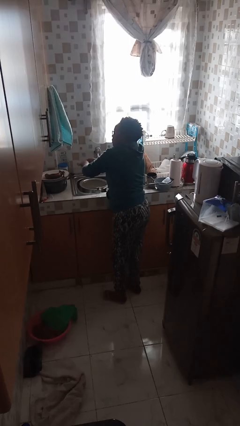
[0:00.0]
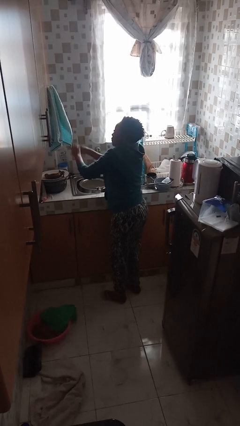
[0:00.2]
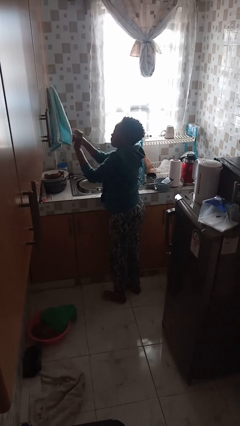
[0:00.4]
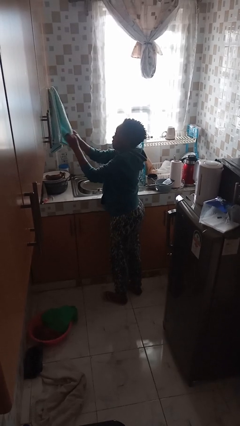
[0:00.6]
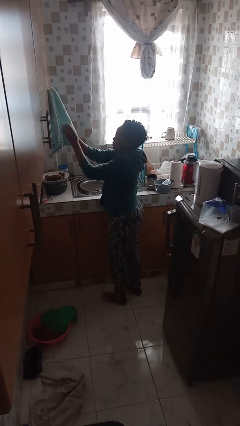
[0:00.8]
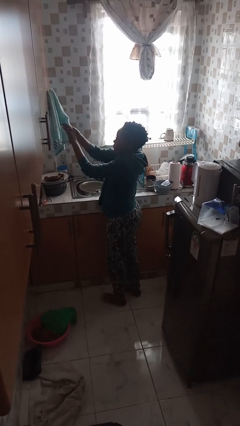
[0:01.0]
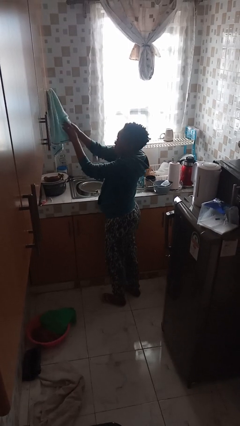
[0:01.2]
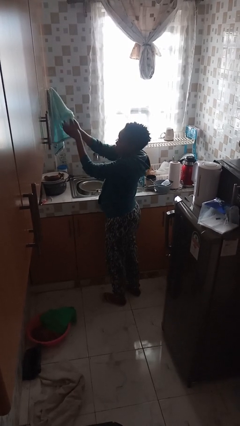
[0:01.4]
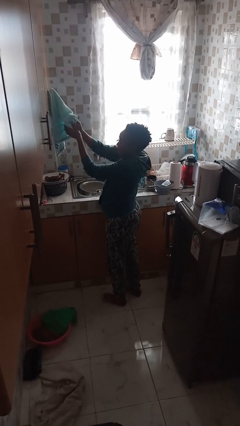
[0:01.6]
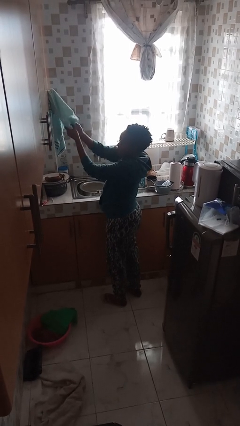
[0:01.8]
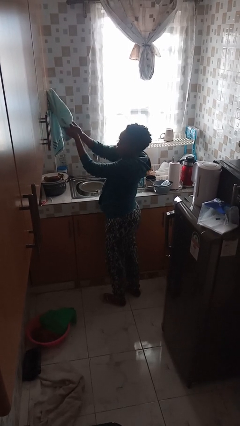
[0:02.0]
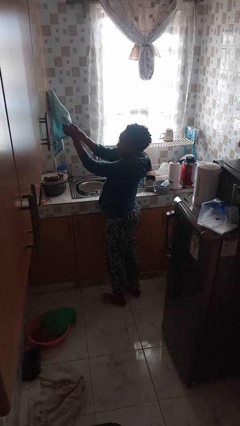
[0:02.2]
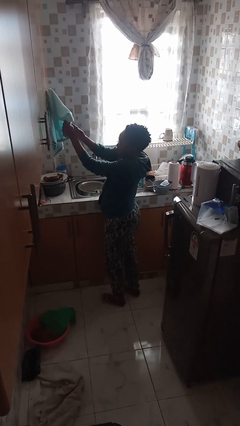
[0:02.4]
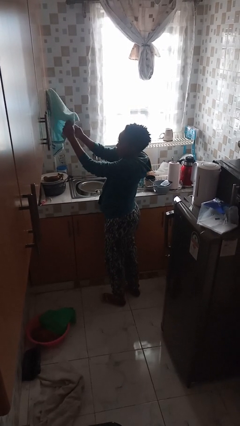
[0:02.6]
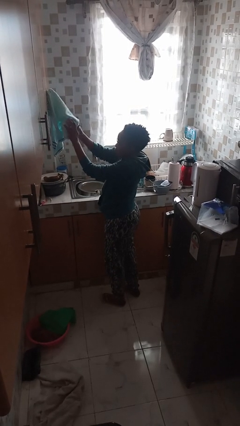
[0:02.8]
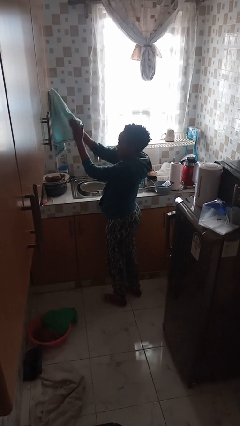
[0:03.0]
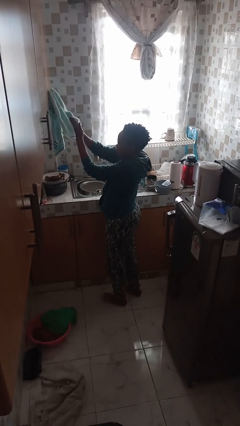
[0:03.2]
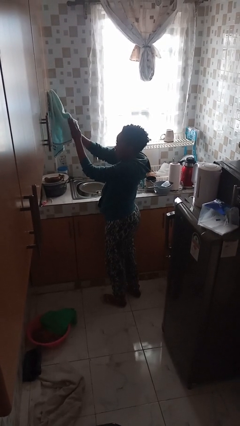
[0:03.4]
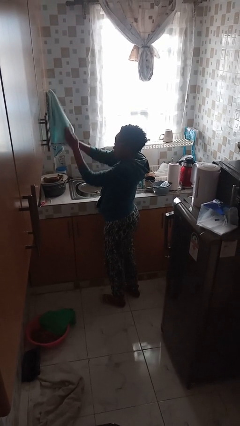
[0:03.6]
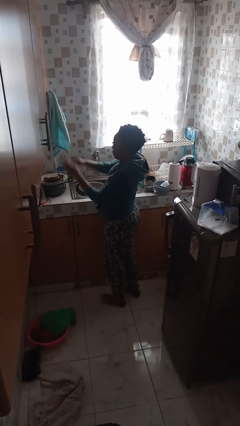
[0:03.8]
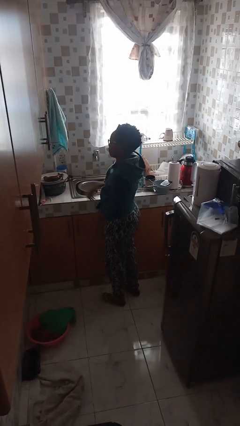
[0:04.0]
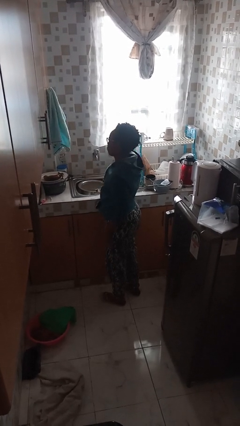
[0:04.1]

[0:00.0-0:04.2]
person dries hands with towel

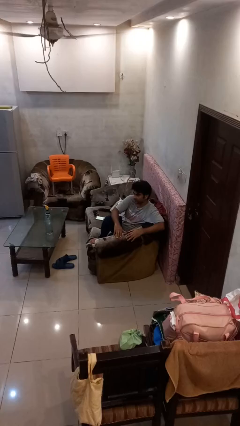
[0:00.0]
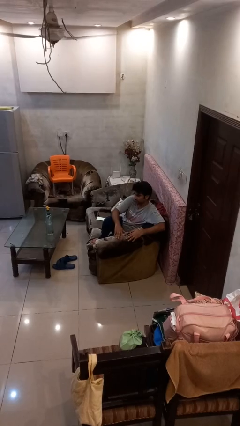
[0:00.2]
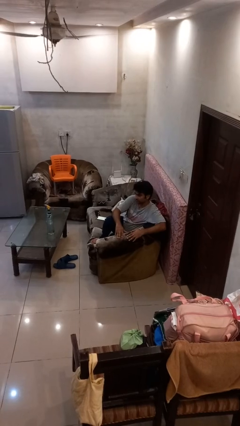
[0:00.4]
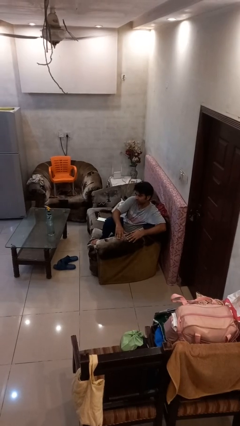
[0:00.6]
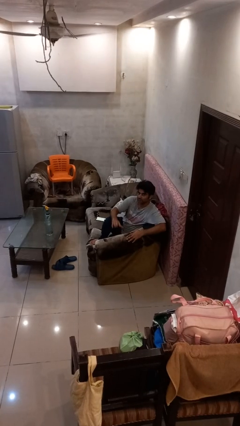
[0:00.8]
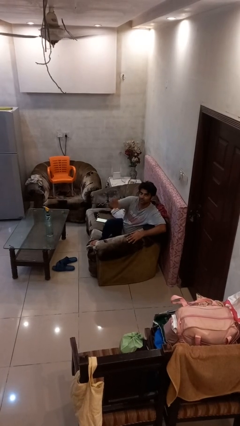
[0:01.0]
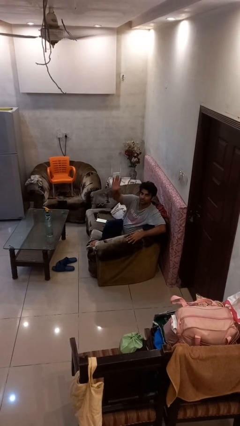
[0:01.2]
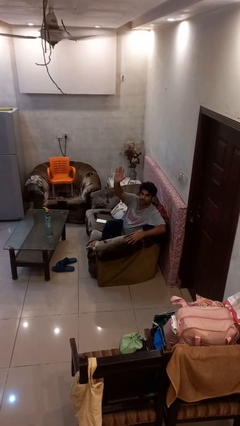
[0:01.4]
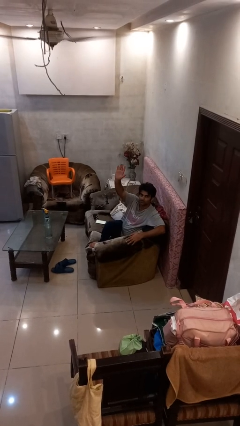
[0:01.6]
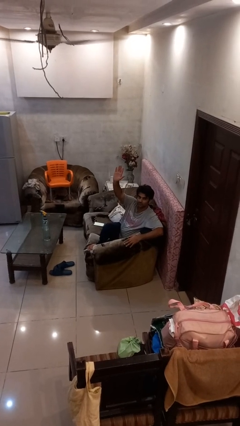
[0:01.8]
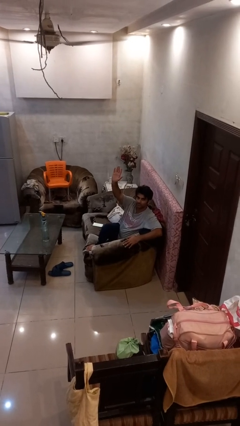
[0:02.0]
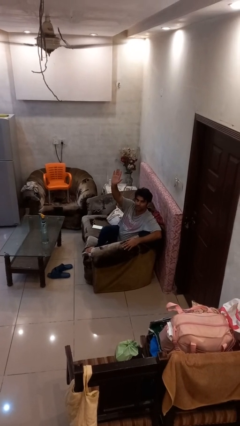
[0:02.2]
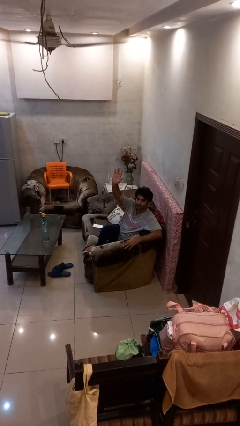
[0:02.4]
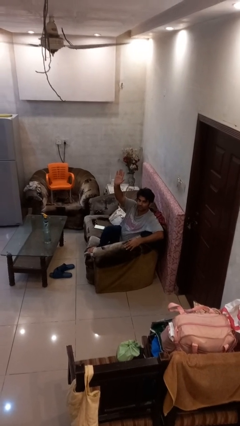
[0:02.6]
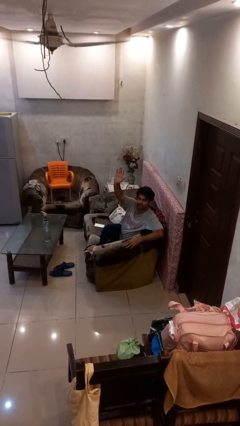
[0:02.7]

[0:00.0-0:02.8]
person gestures raise hand

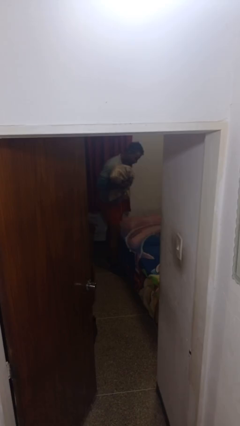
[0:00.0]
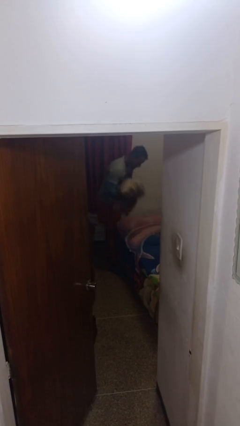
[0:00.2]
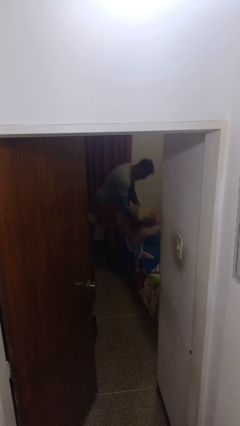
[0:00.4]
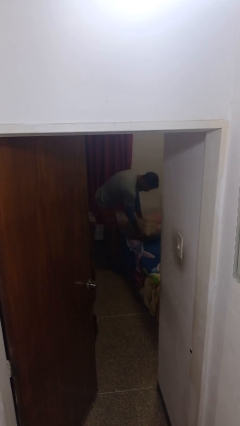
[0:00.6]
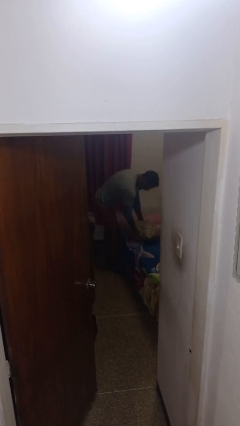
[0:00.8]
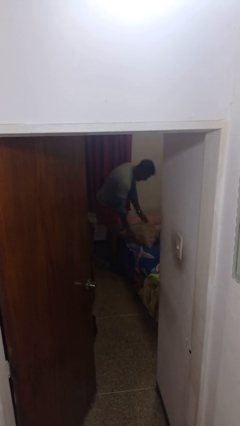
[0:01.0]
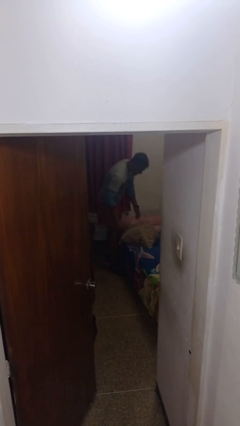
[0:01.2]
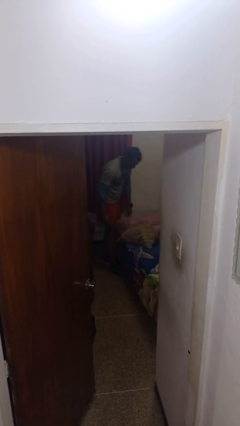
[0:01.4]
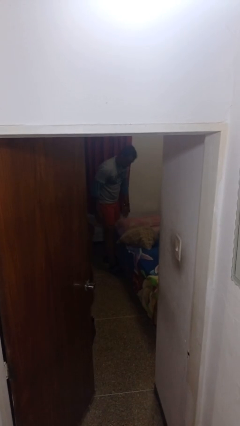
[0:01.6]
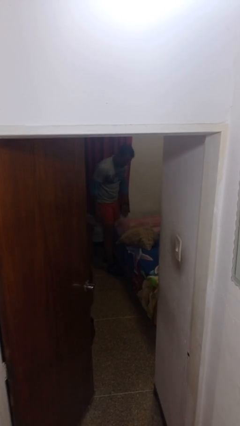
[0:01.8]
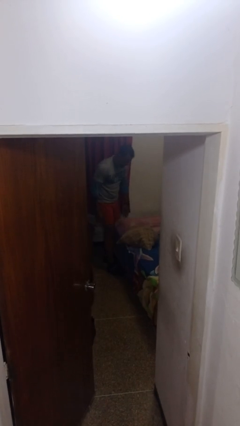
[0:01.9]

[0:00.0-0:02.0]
person puts down object on bed

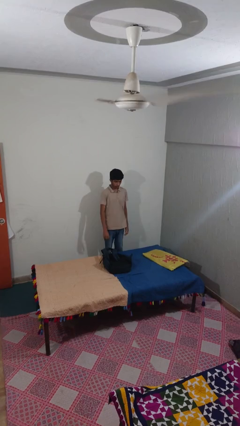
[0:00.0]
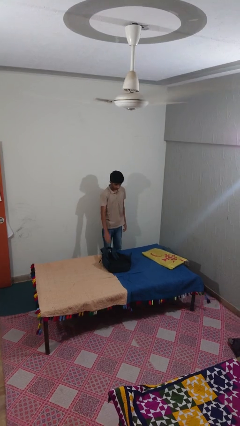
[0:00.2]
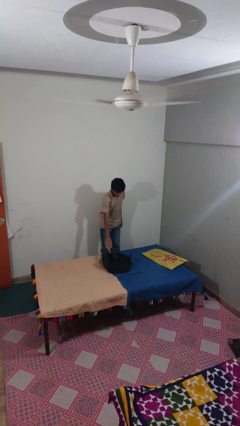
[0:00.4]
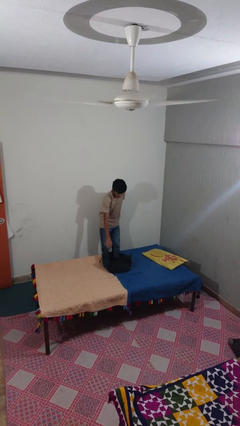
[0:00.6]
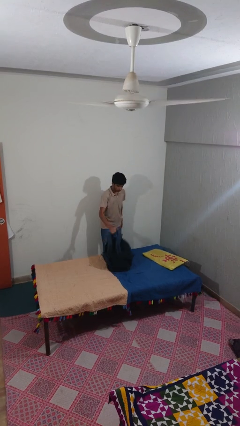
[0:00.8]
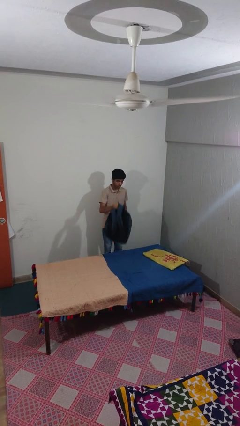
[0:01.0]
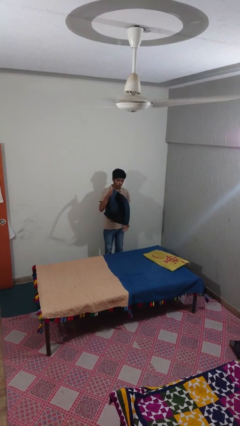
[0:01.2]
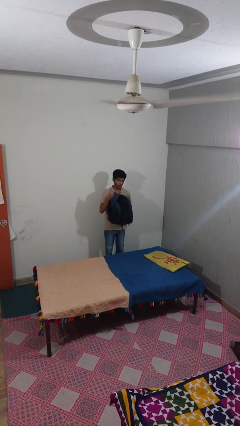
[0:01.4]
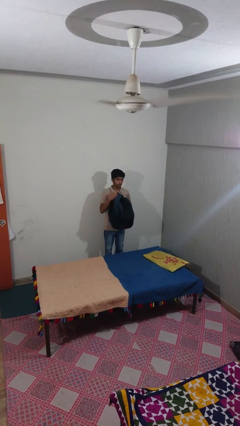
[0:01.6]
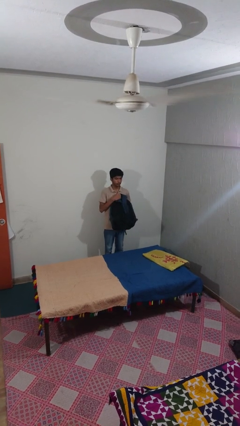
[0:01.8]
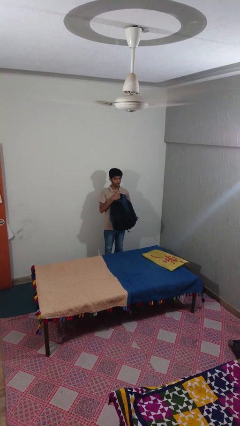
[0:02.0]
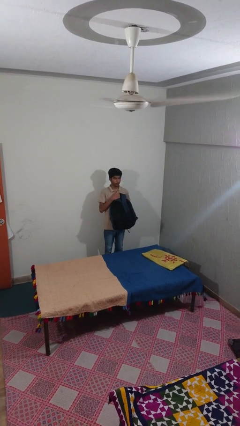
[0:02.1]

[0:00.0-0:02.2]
person picks up object from bed

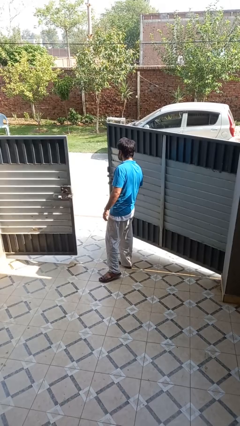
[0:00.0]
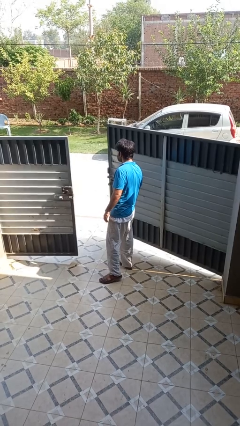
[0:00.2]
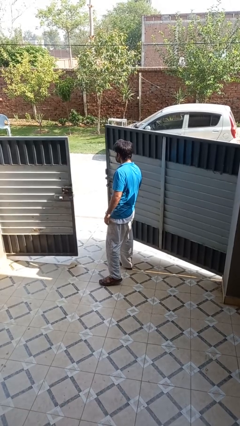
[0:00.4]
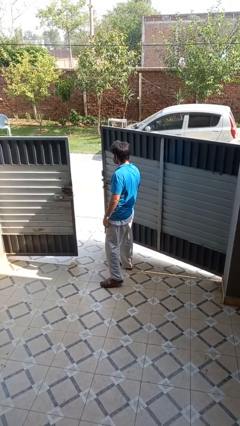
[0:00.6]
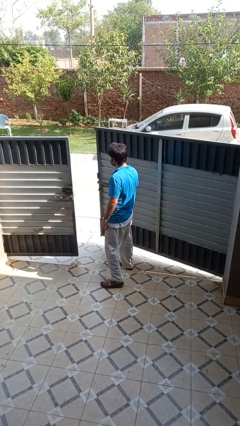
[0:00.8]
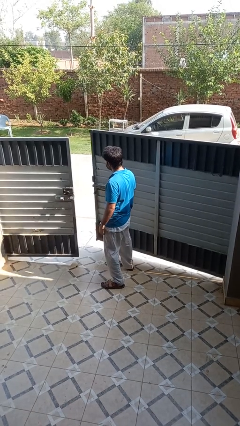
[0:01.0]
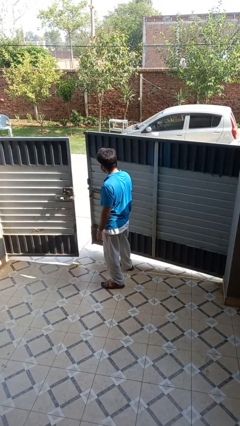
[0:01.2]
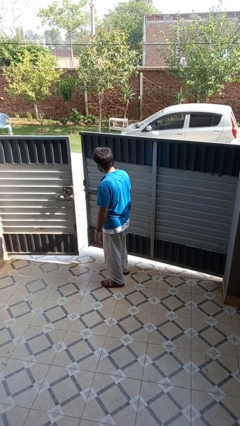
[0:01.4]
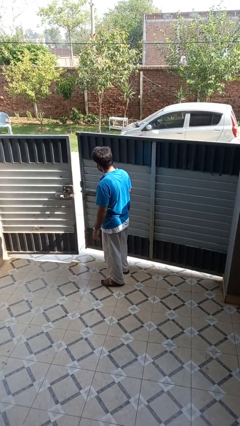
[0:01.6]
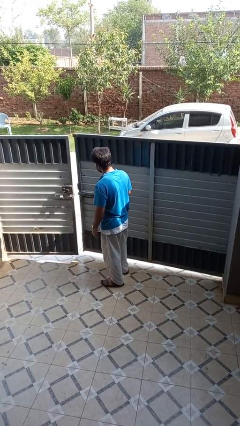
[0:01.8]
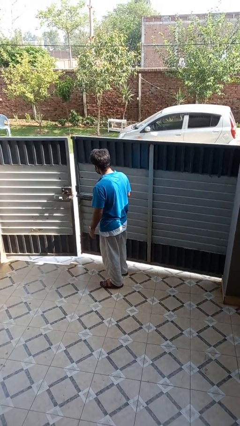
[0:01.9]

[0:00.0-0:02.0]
person closes gate

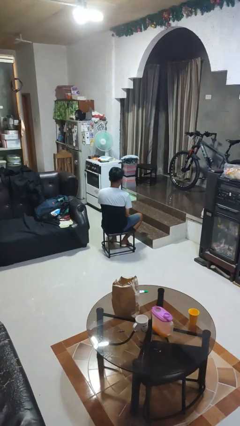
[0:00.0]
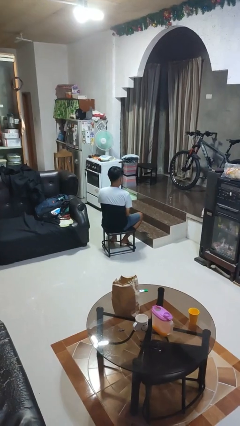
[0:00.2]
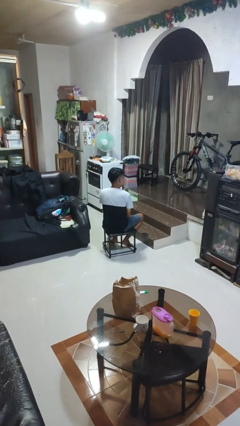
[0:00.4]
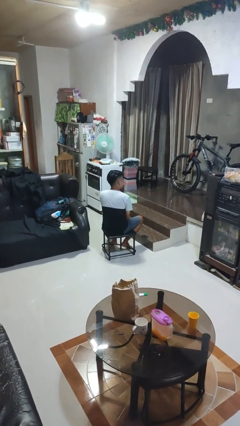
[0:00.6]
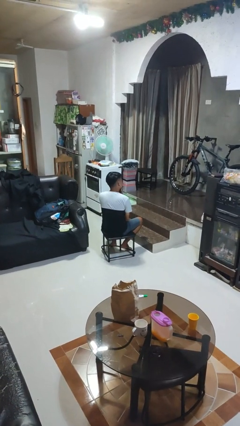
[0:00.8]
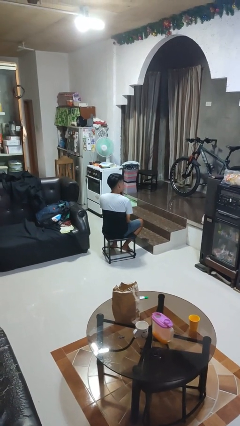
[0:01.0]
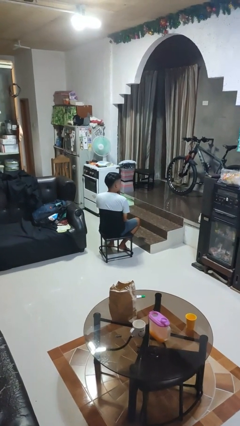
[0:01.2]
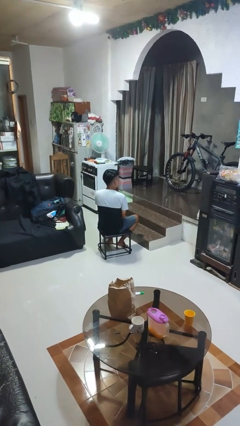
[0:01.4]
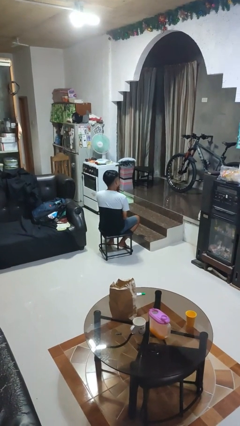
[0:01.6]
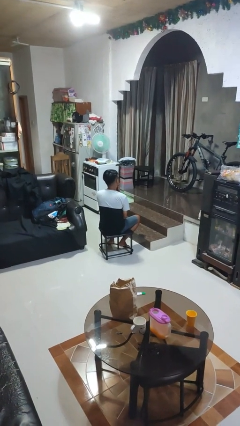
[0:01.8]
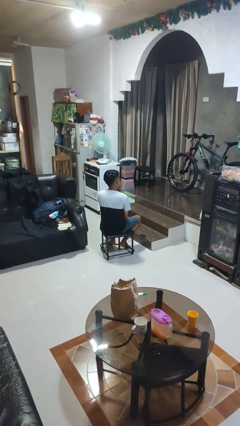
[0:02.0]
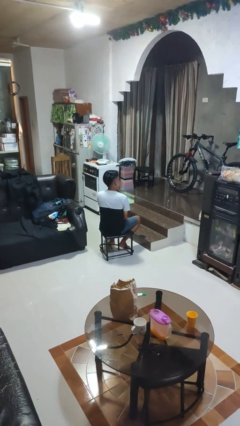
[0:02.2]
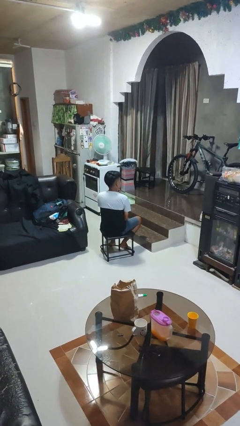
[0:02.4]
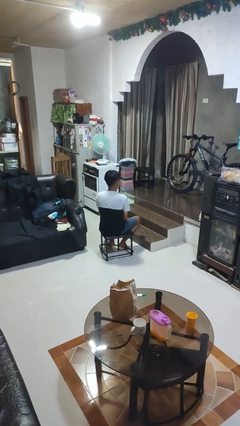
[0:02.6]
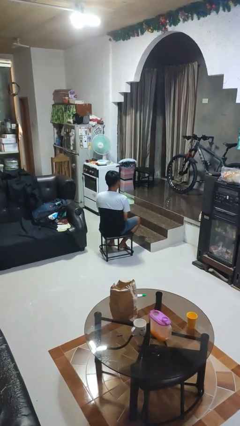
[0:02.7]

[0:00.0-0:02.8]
person strokes chin

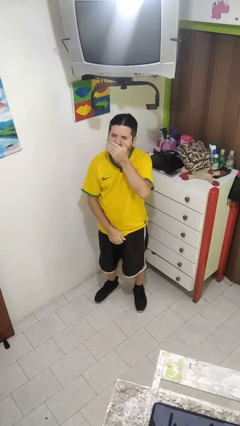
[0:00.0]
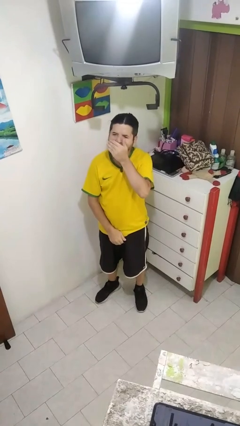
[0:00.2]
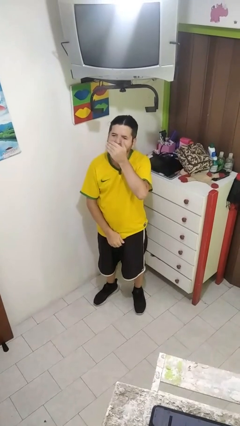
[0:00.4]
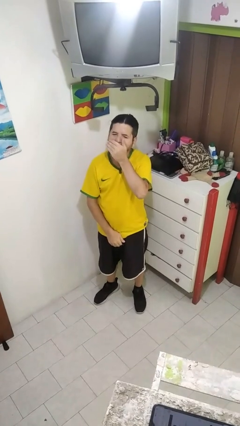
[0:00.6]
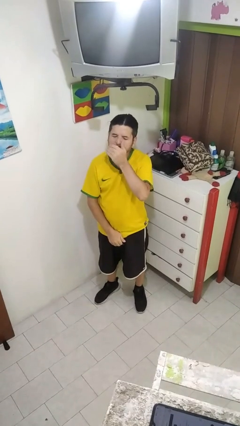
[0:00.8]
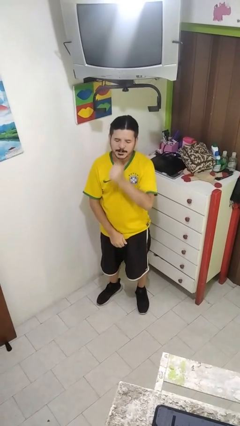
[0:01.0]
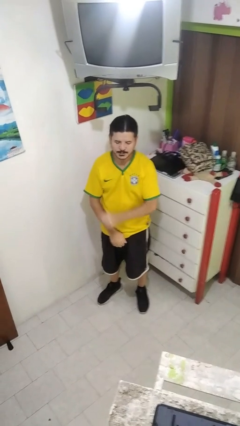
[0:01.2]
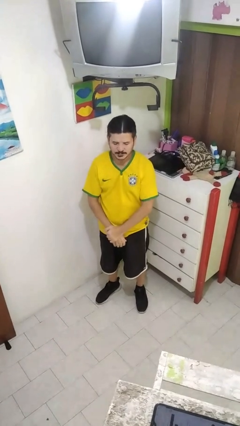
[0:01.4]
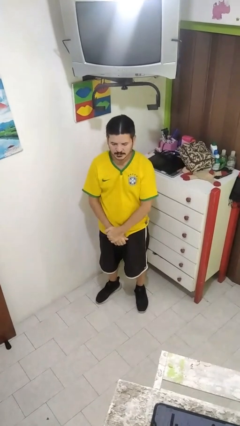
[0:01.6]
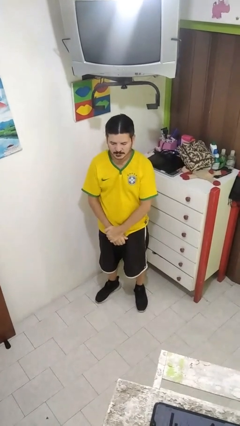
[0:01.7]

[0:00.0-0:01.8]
person yawns
